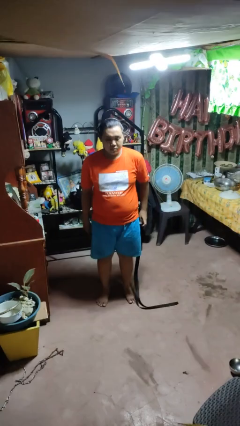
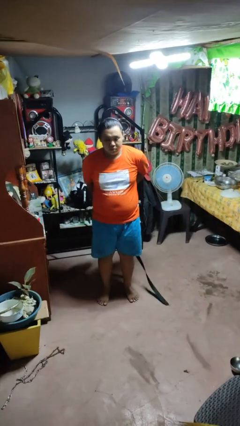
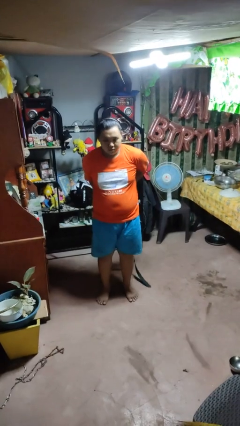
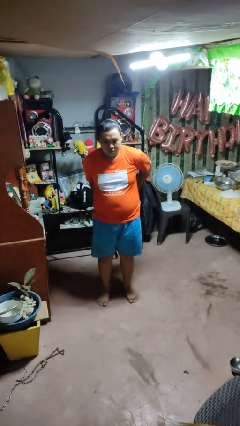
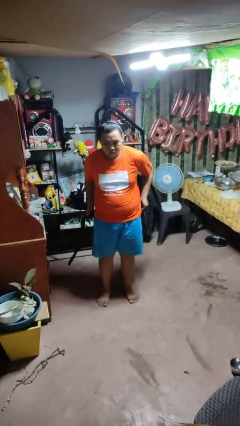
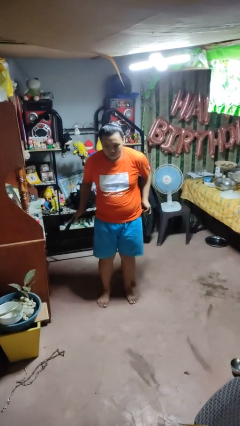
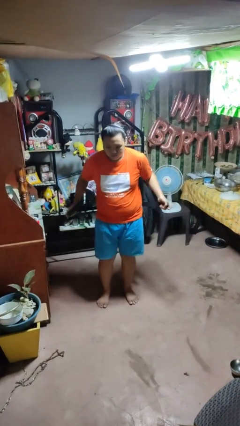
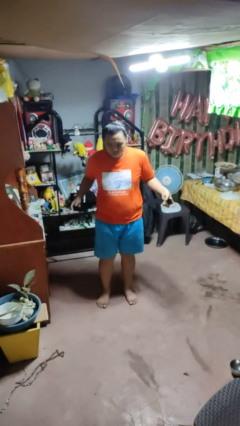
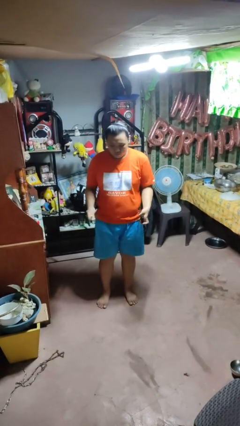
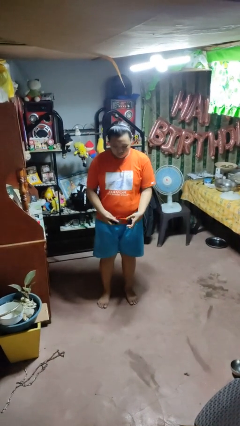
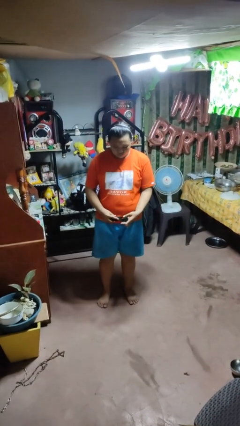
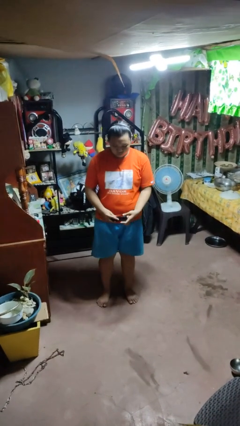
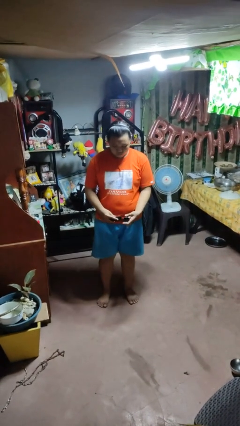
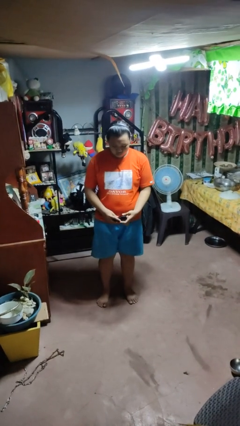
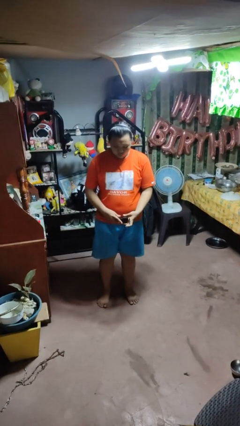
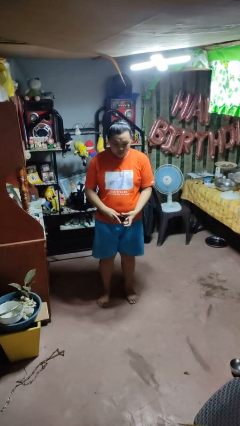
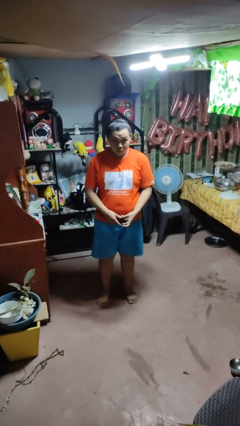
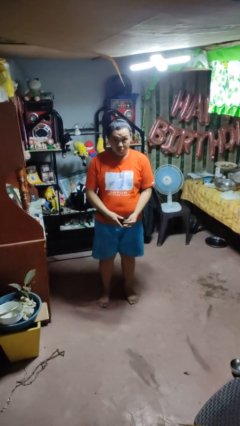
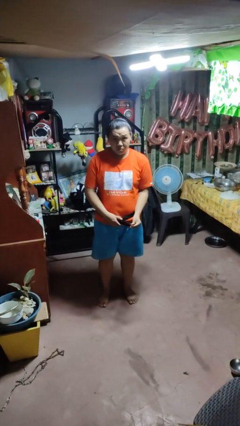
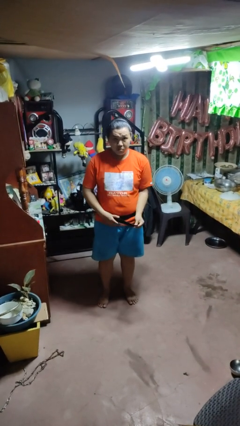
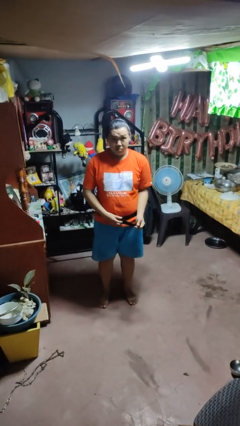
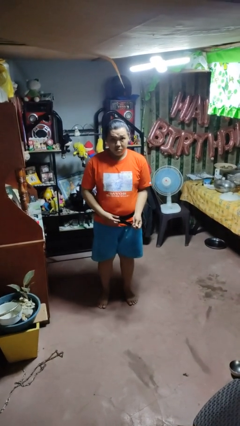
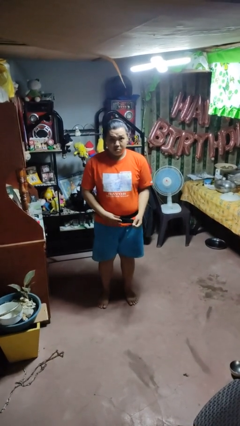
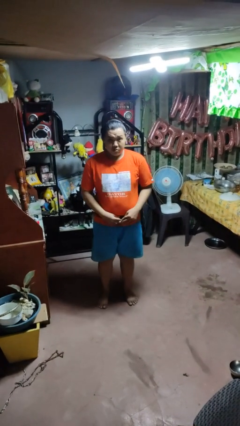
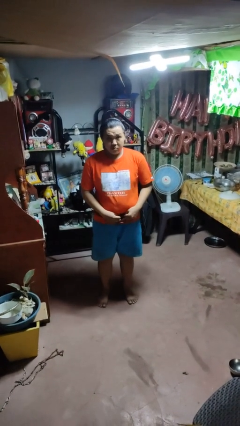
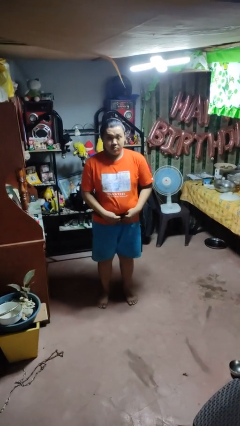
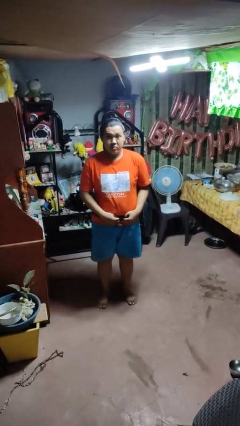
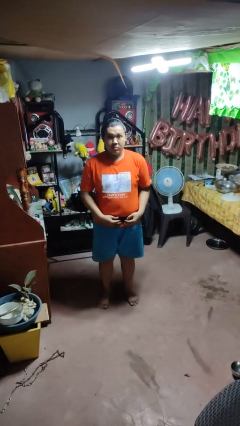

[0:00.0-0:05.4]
person puts on belt

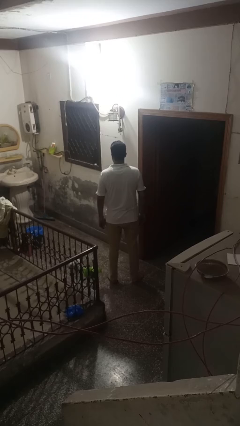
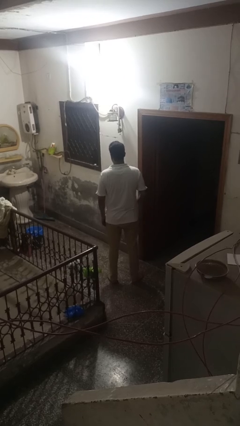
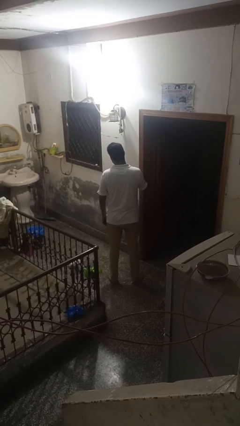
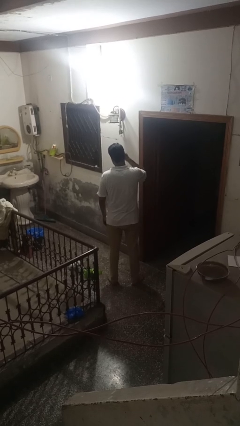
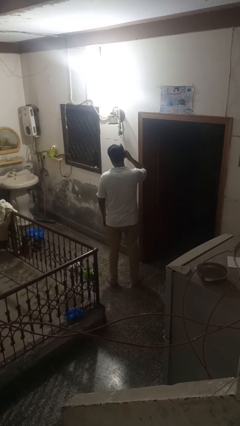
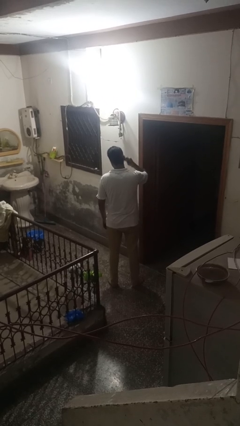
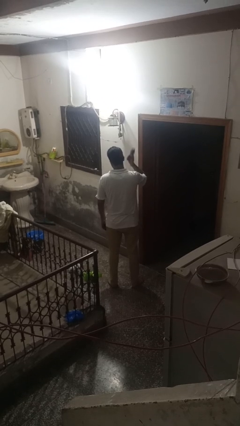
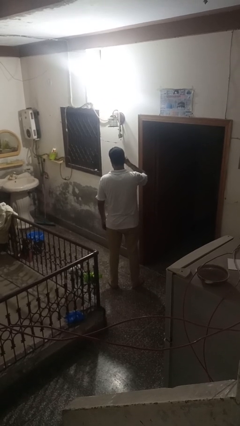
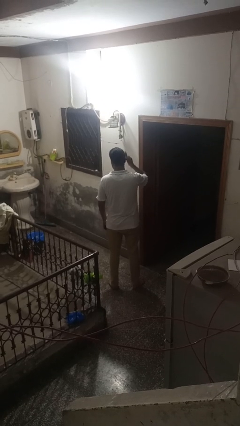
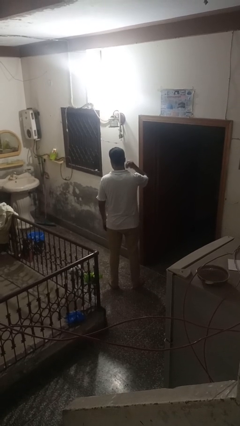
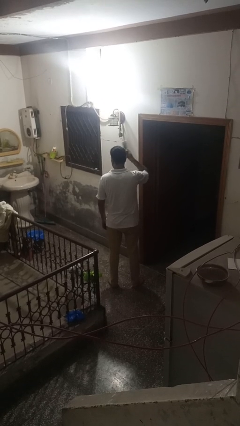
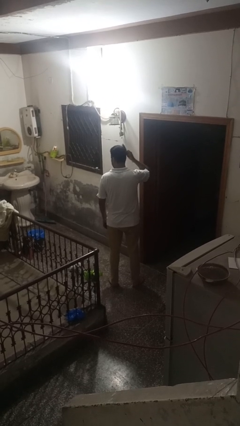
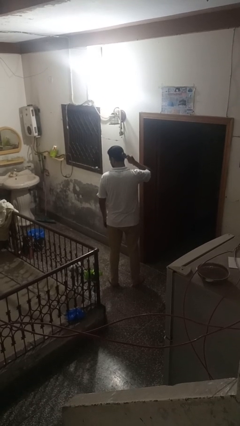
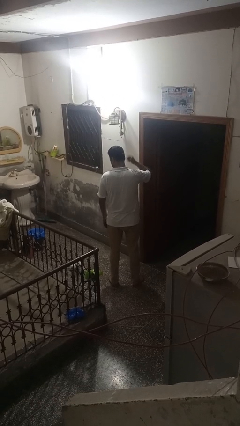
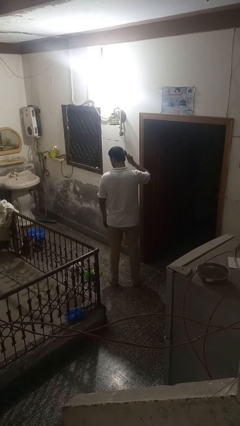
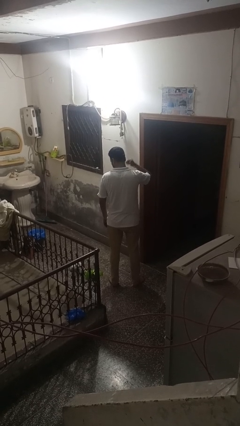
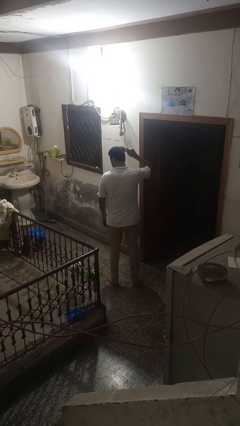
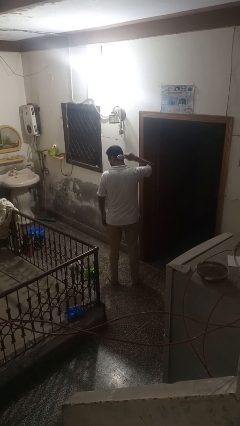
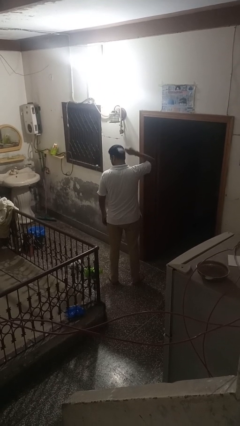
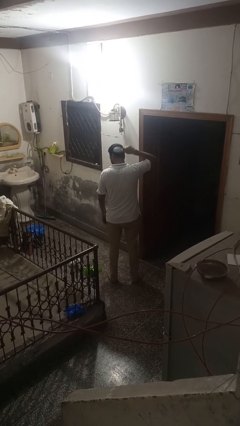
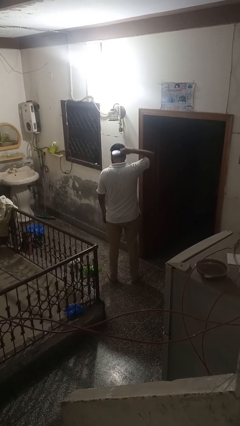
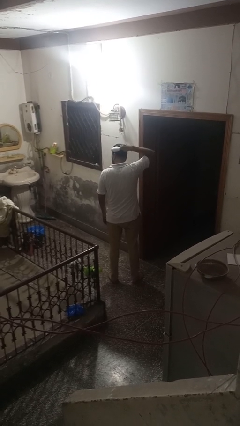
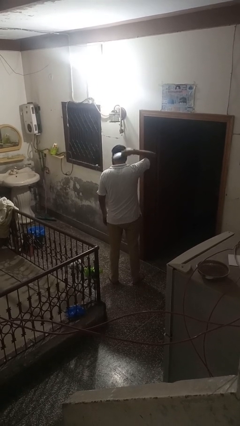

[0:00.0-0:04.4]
person brushes hair

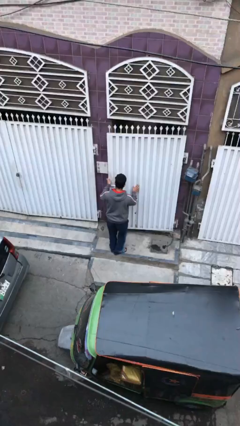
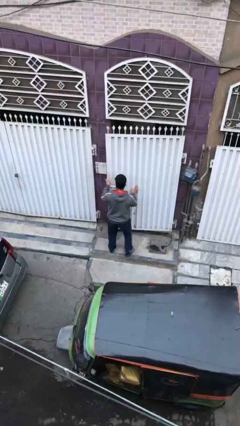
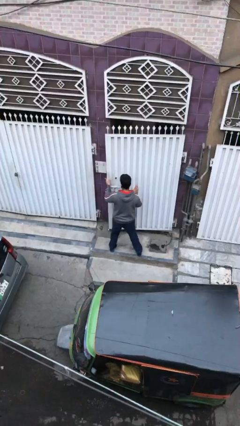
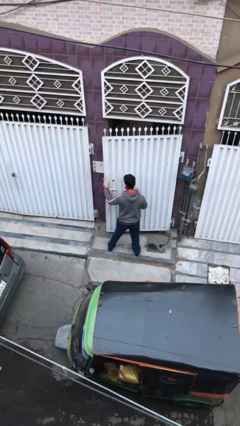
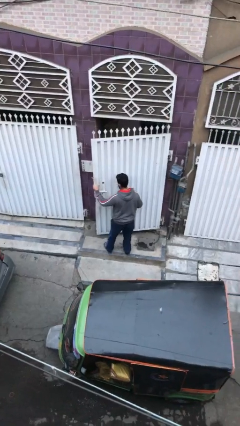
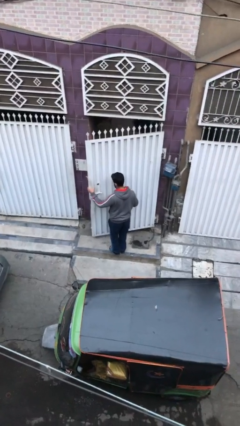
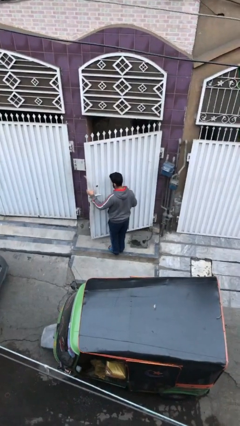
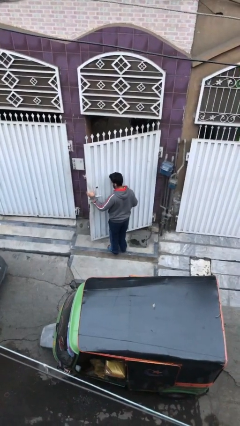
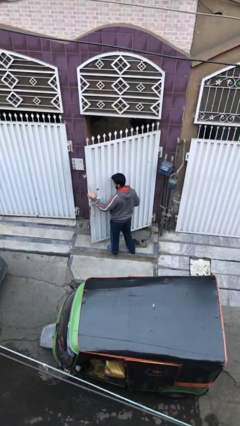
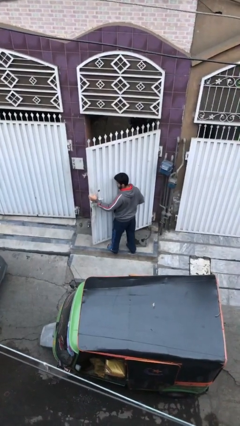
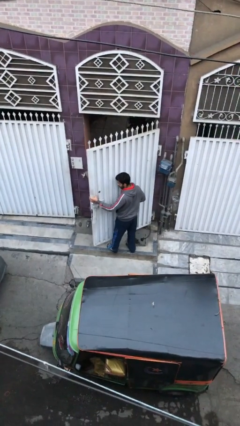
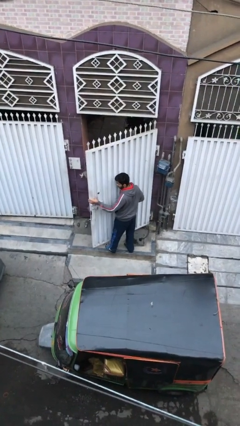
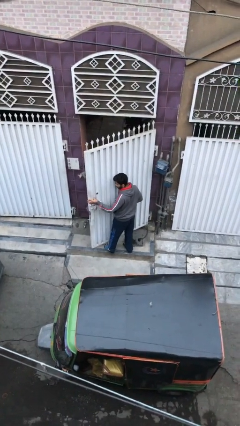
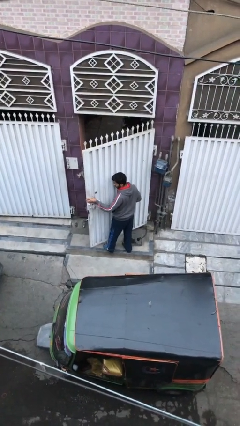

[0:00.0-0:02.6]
person opens facility door

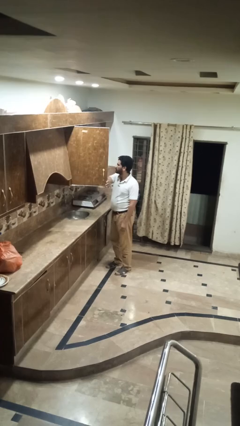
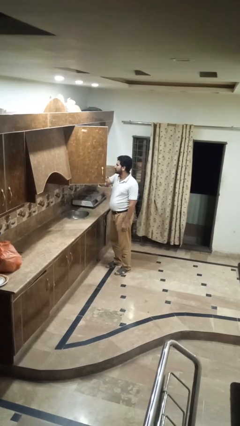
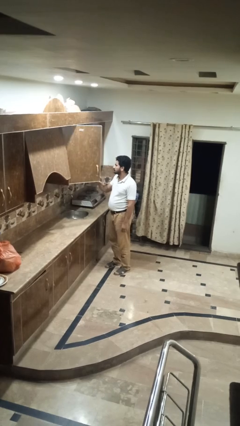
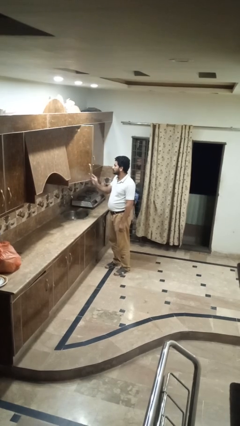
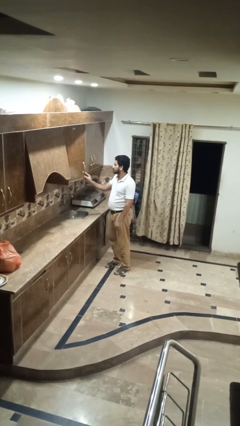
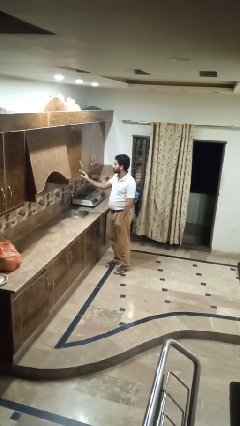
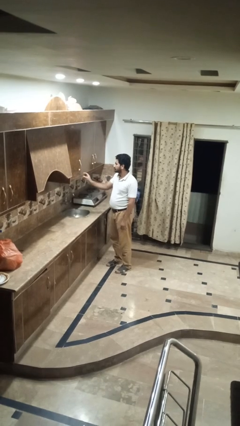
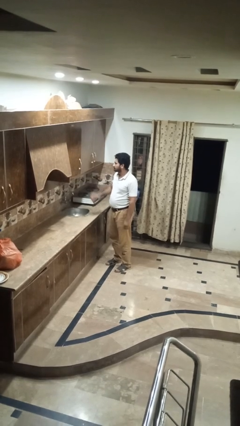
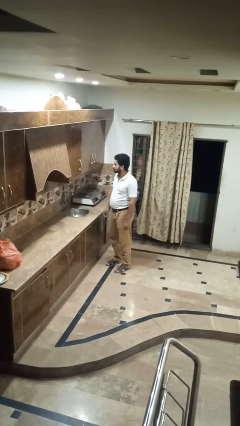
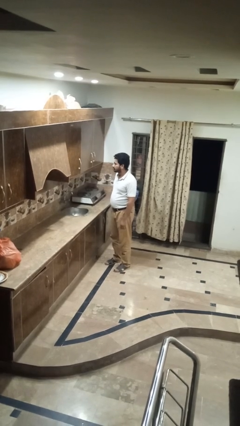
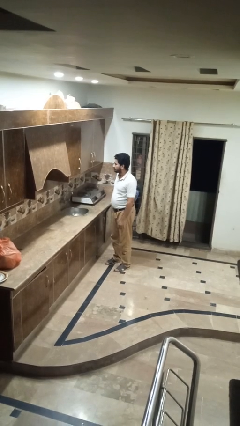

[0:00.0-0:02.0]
person closes kitchen drawer

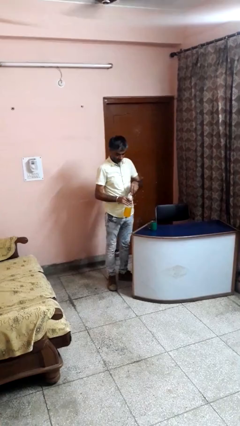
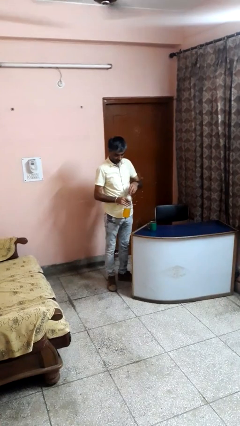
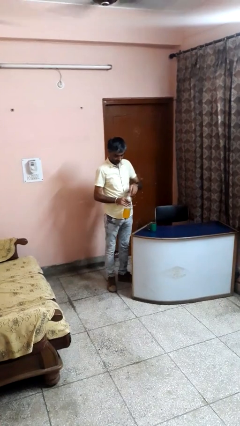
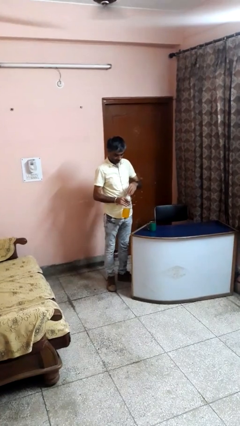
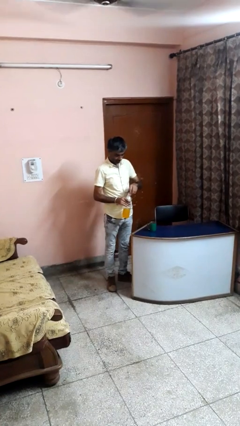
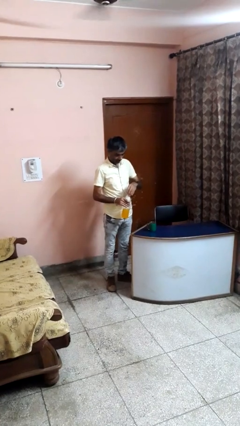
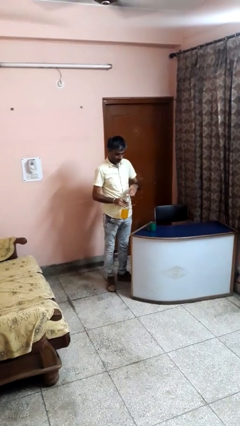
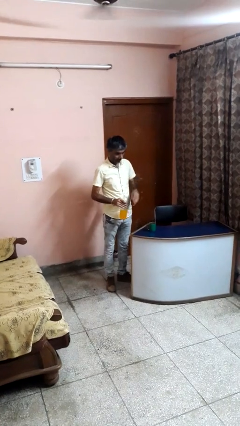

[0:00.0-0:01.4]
person screws lid to bottle

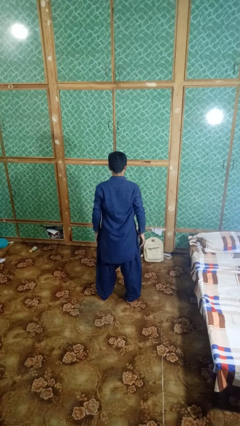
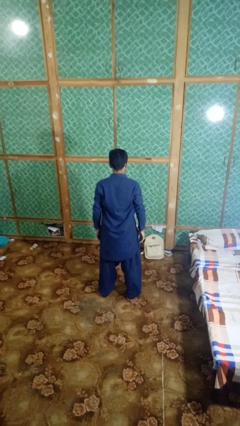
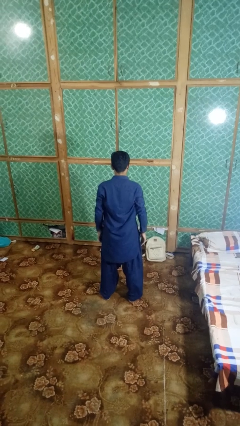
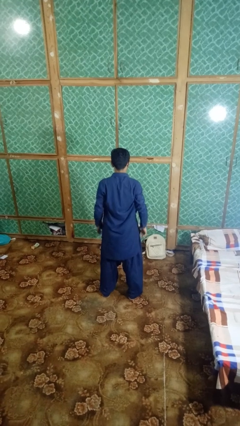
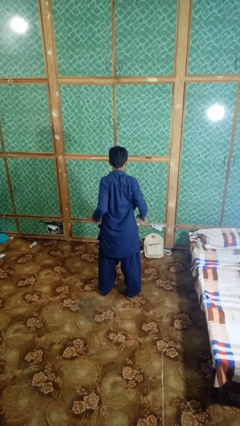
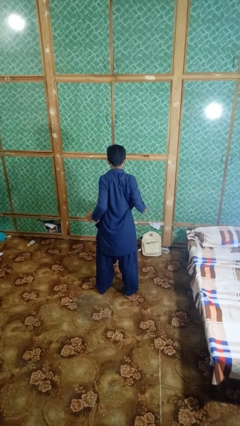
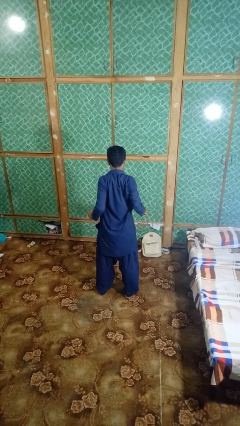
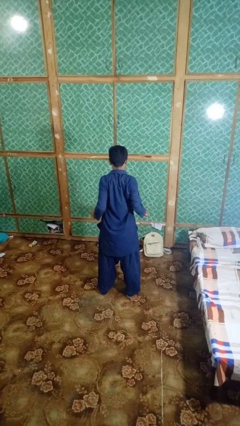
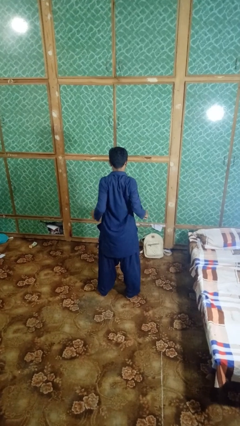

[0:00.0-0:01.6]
person stretches back
